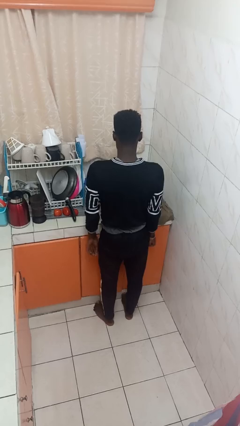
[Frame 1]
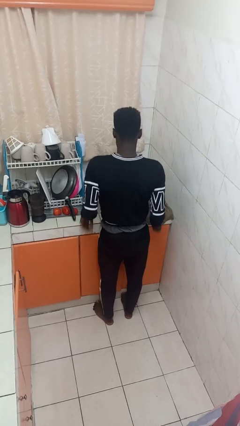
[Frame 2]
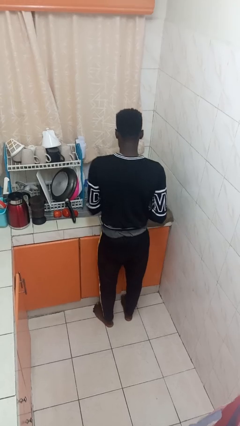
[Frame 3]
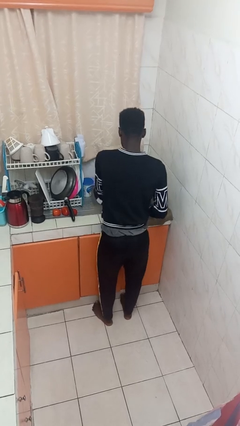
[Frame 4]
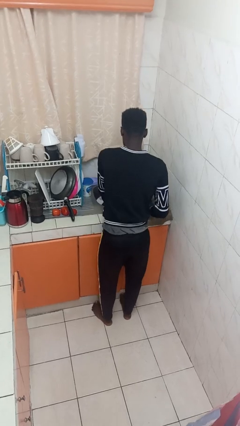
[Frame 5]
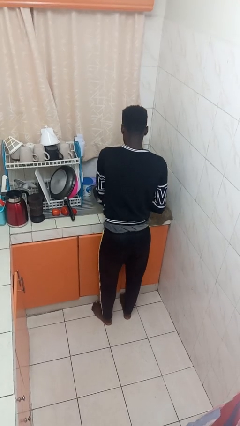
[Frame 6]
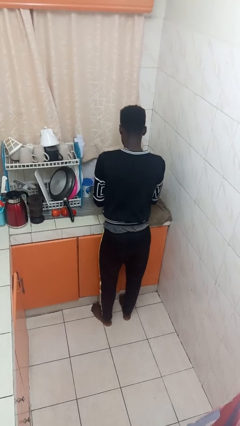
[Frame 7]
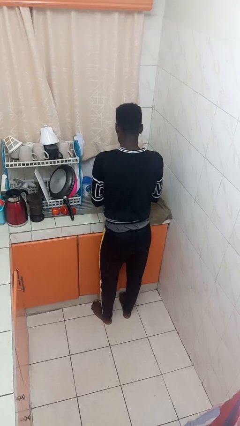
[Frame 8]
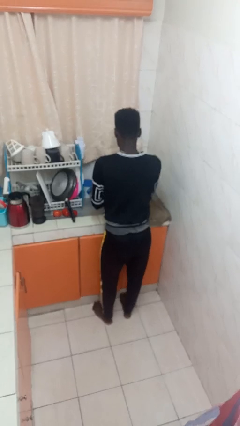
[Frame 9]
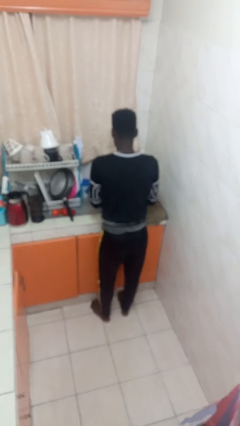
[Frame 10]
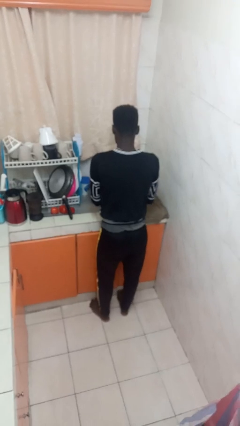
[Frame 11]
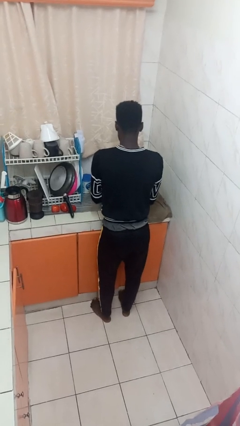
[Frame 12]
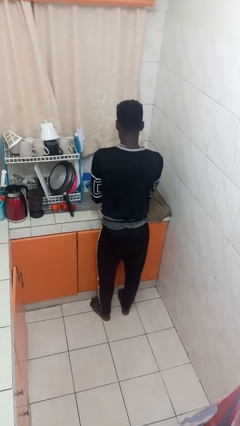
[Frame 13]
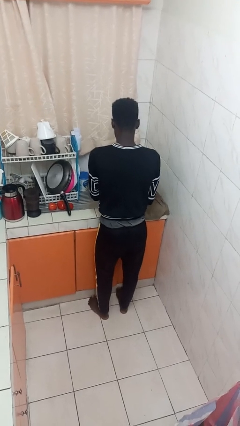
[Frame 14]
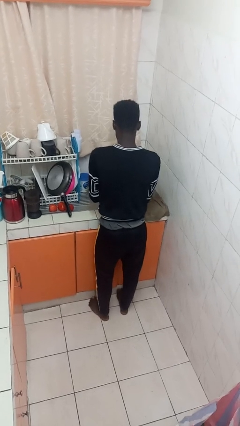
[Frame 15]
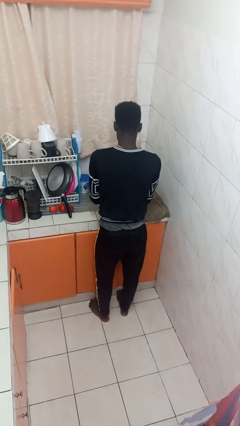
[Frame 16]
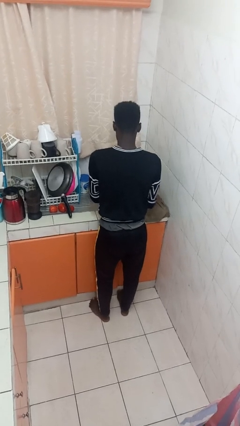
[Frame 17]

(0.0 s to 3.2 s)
person washes dish

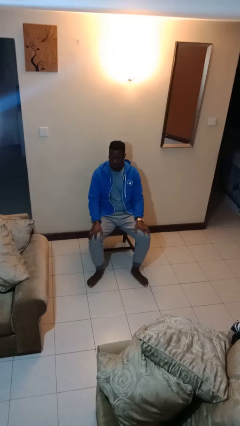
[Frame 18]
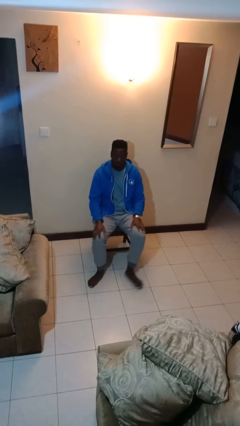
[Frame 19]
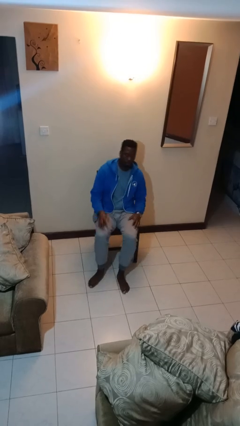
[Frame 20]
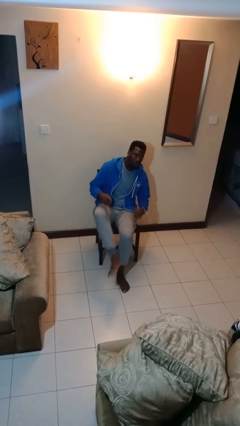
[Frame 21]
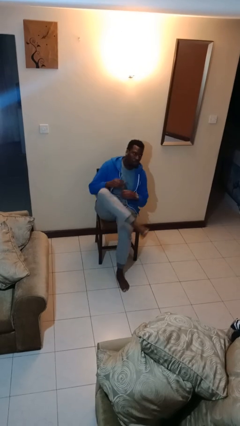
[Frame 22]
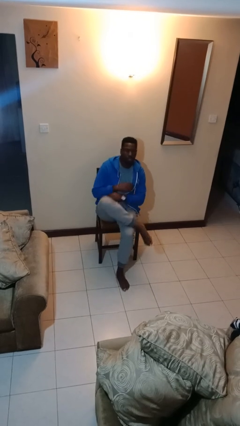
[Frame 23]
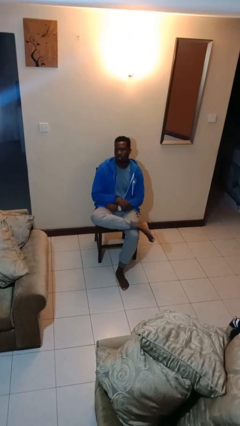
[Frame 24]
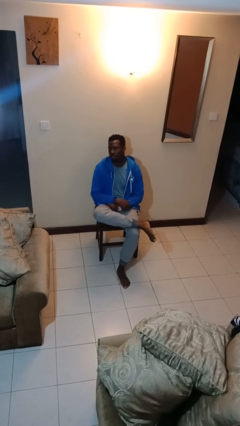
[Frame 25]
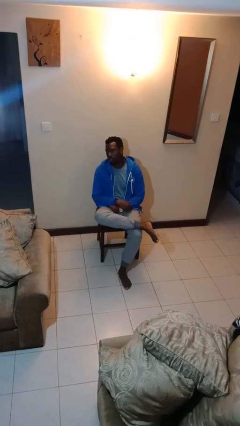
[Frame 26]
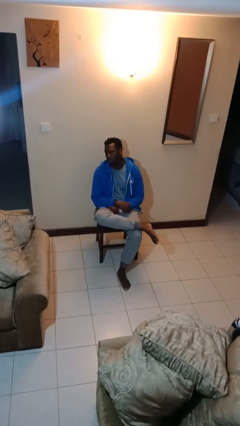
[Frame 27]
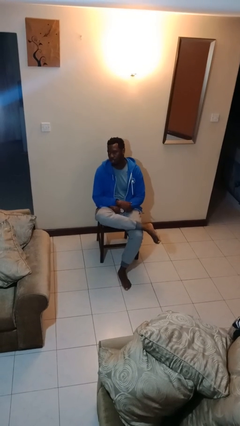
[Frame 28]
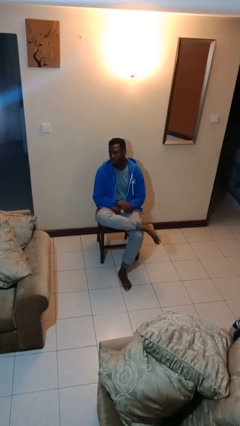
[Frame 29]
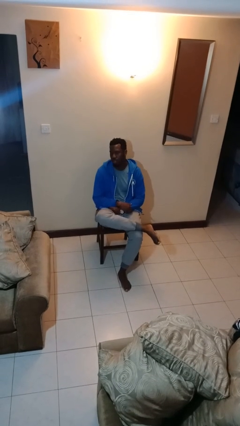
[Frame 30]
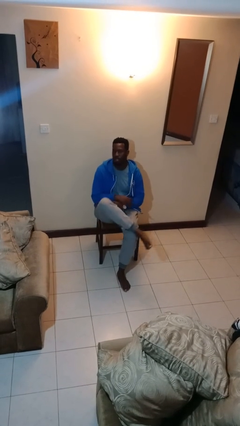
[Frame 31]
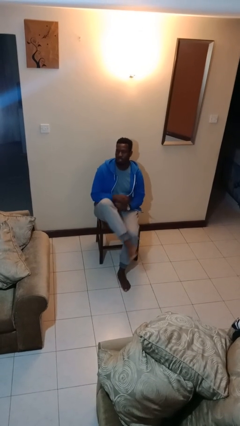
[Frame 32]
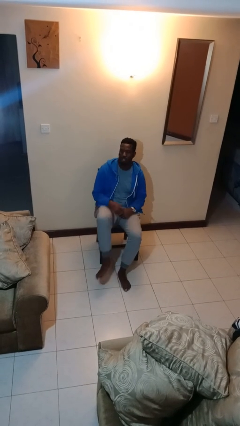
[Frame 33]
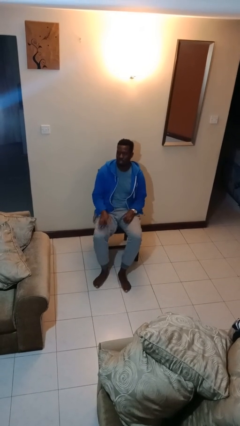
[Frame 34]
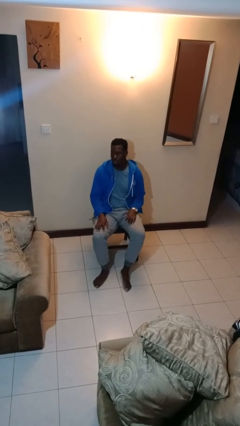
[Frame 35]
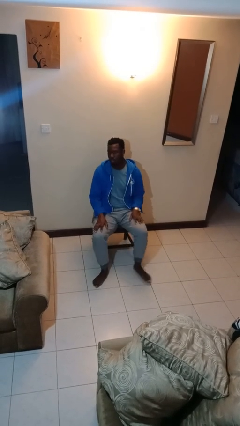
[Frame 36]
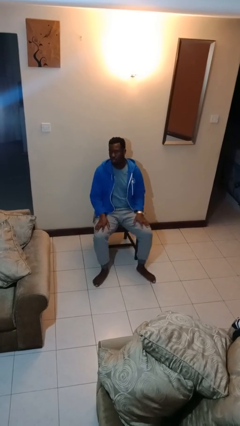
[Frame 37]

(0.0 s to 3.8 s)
person crosses legs

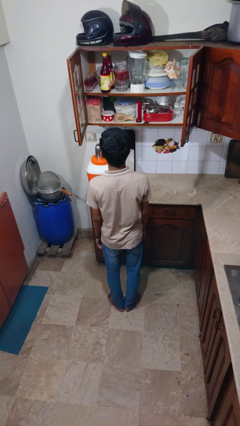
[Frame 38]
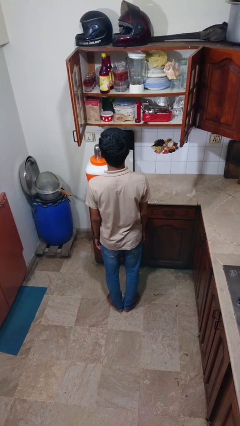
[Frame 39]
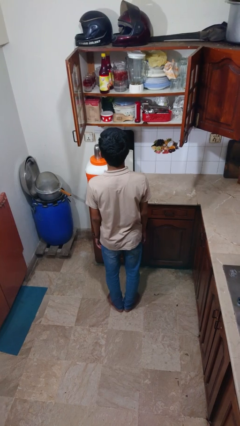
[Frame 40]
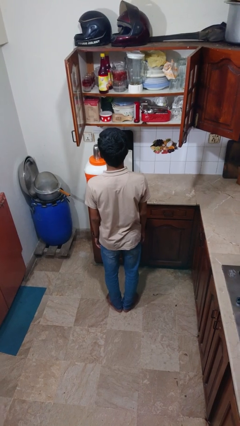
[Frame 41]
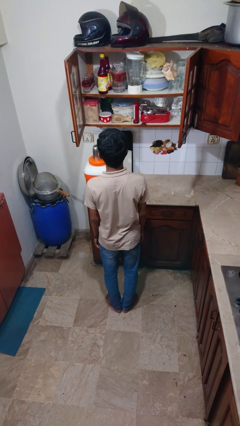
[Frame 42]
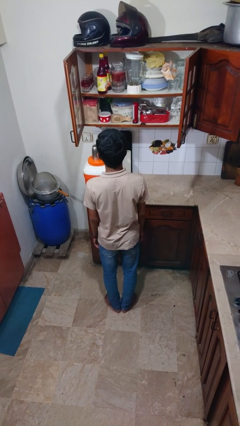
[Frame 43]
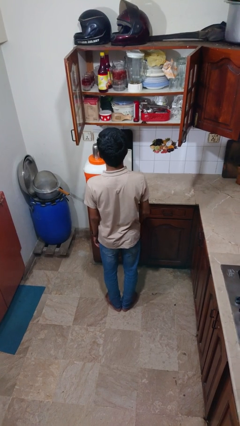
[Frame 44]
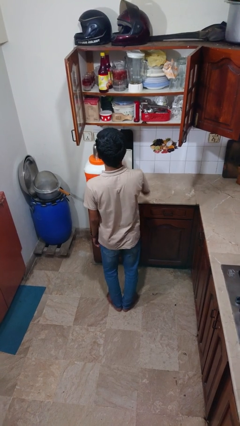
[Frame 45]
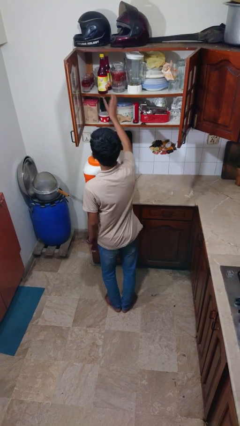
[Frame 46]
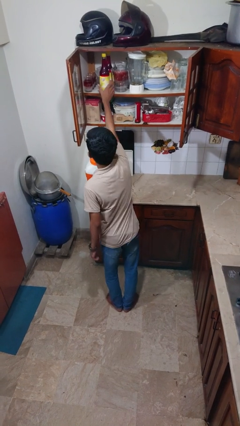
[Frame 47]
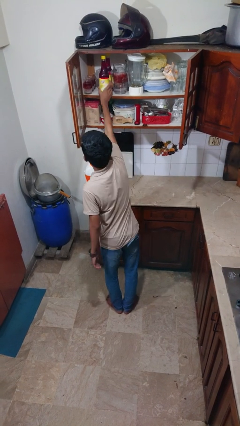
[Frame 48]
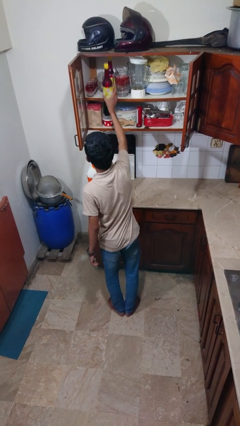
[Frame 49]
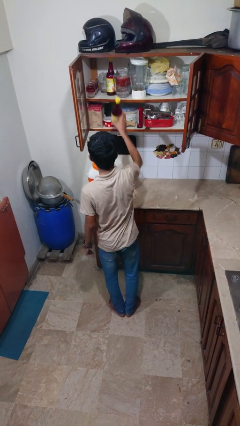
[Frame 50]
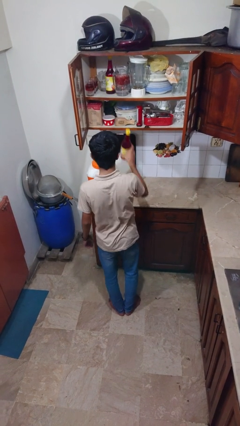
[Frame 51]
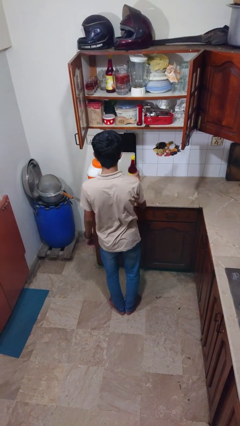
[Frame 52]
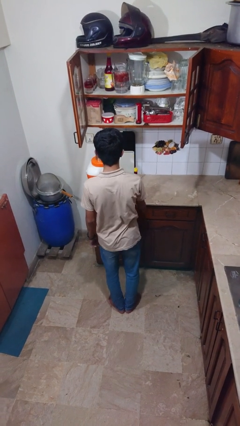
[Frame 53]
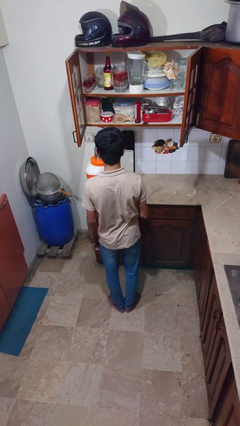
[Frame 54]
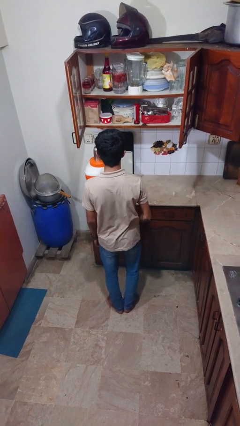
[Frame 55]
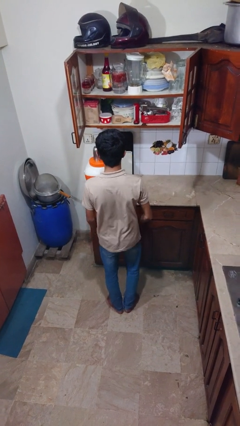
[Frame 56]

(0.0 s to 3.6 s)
person picks up object from cabinet

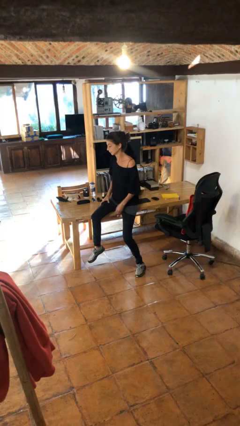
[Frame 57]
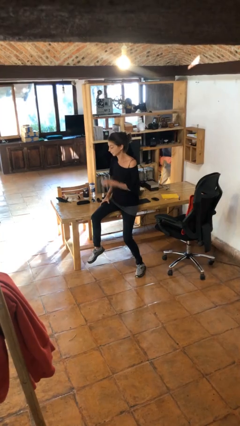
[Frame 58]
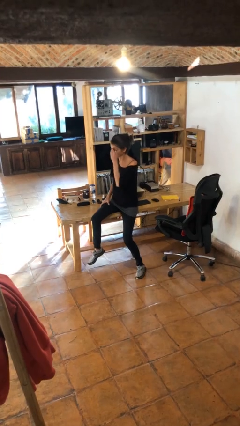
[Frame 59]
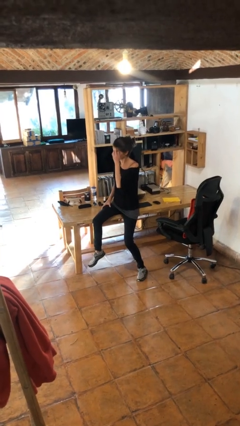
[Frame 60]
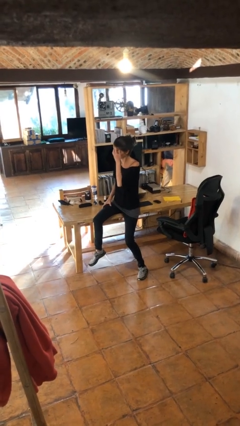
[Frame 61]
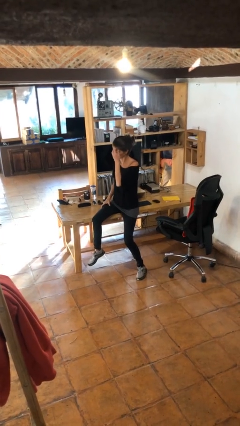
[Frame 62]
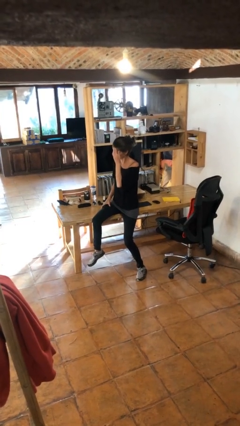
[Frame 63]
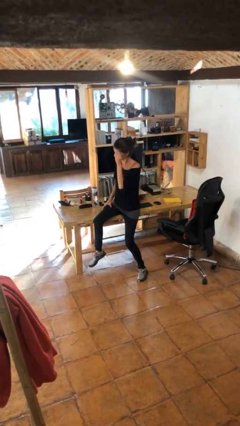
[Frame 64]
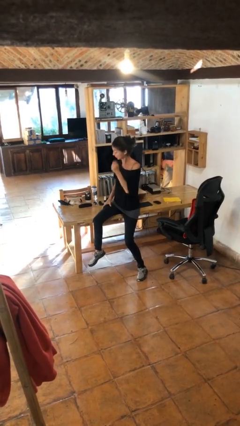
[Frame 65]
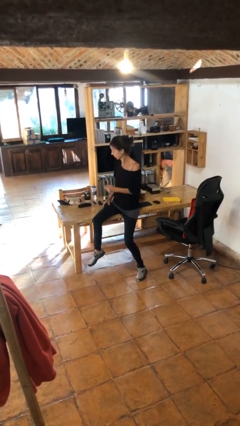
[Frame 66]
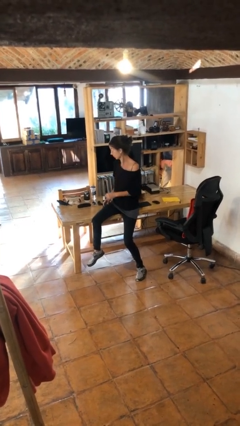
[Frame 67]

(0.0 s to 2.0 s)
person scratches face

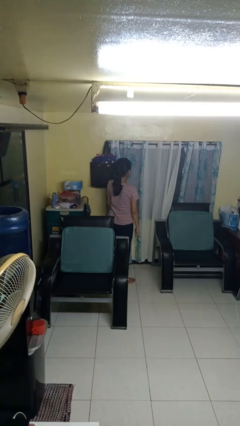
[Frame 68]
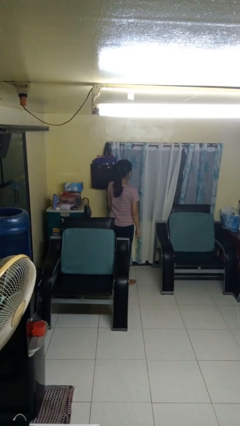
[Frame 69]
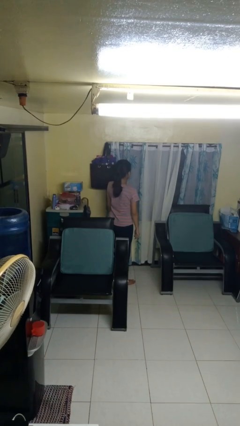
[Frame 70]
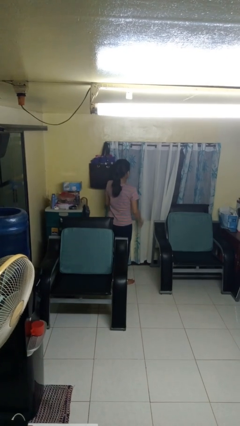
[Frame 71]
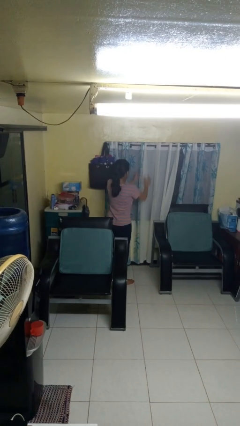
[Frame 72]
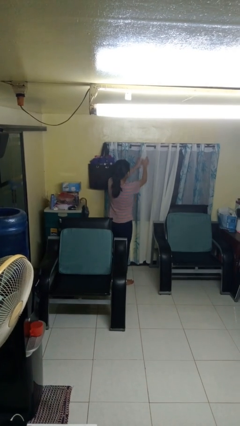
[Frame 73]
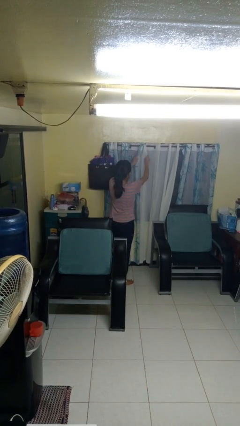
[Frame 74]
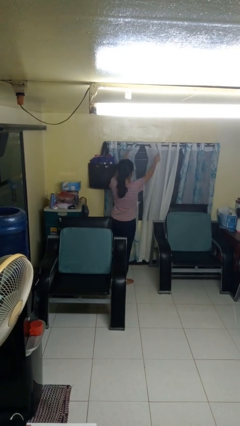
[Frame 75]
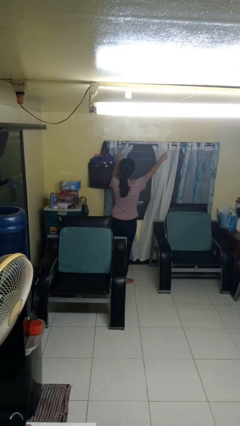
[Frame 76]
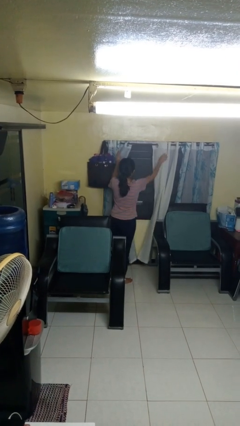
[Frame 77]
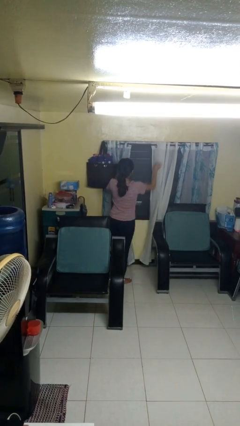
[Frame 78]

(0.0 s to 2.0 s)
person opens curtains

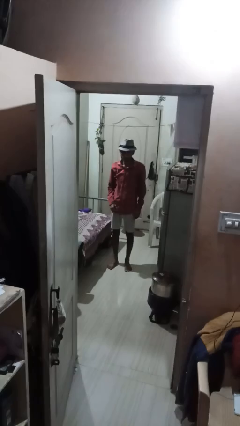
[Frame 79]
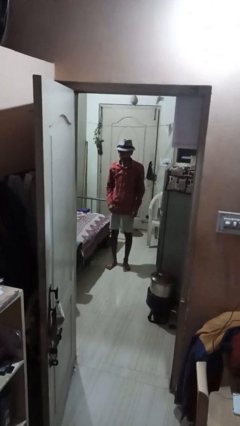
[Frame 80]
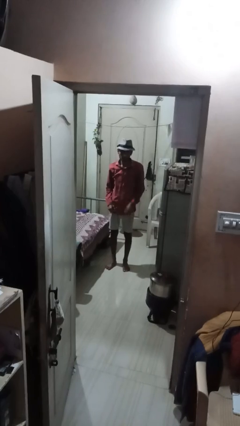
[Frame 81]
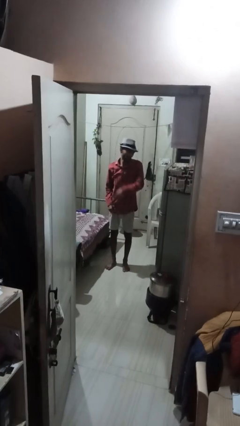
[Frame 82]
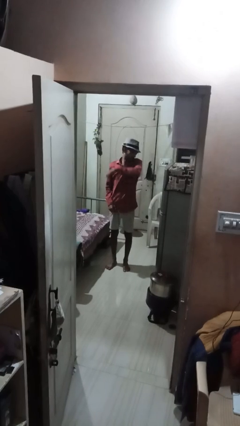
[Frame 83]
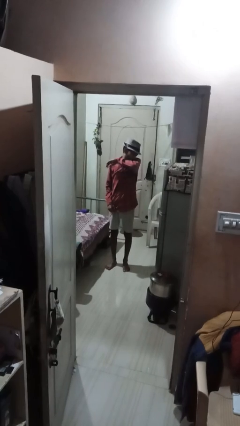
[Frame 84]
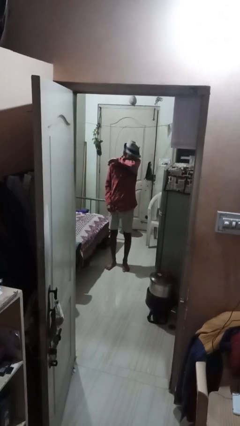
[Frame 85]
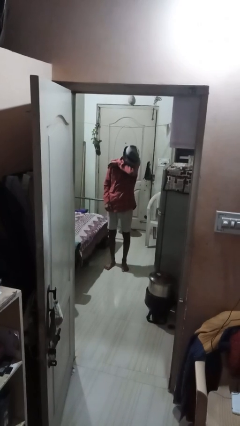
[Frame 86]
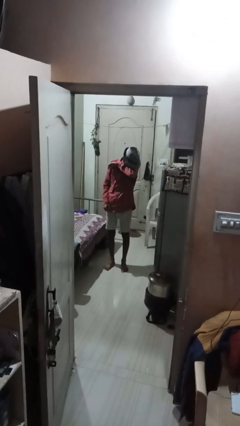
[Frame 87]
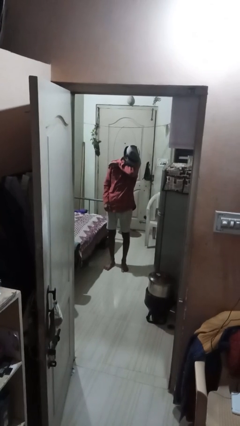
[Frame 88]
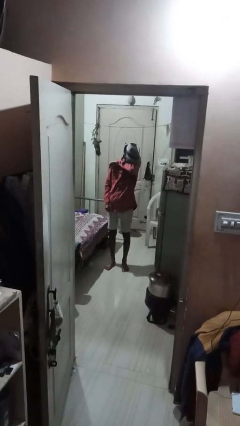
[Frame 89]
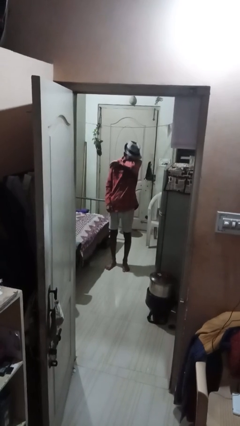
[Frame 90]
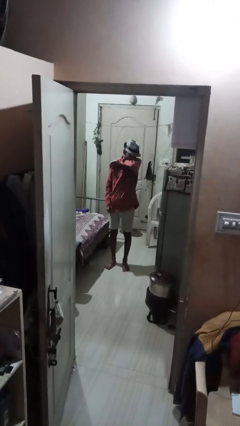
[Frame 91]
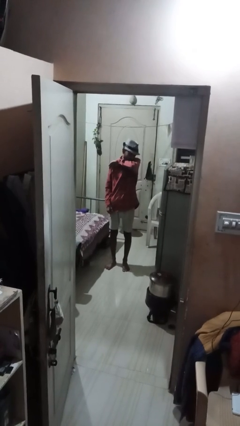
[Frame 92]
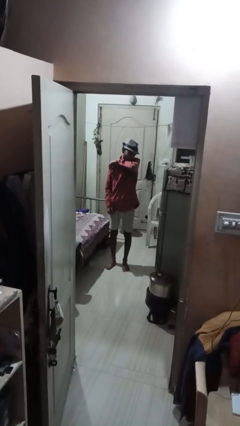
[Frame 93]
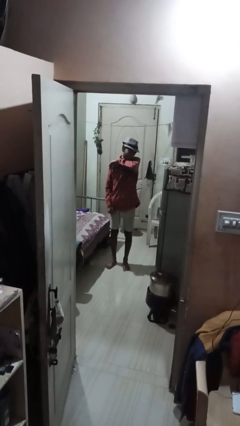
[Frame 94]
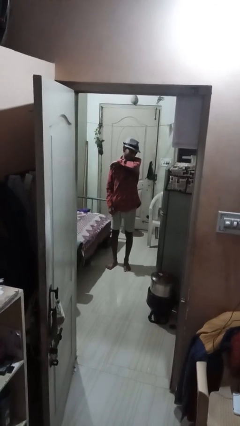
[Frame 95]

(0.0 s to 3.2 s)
person sneezes into arm
